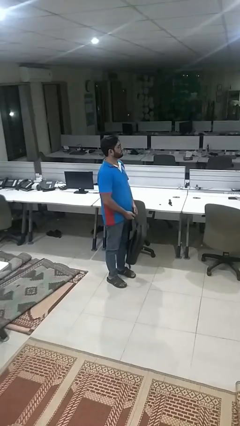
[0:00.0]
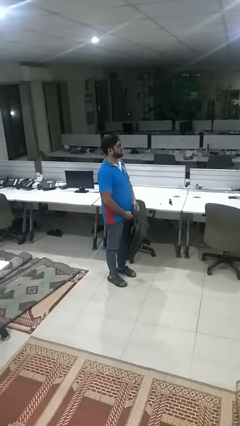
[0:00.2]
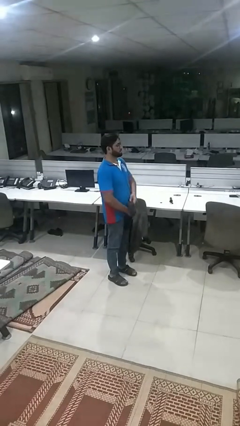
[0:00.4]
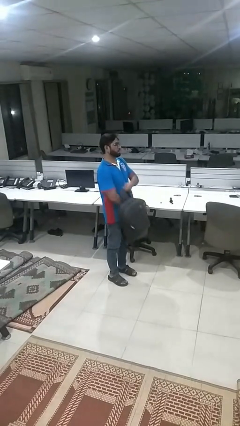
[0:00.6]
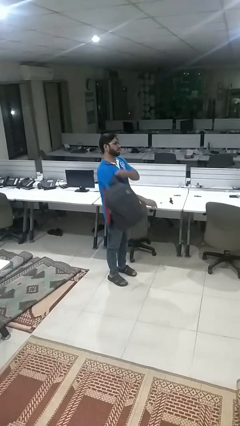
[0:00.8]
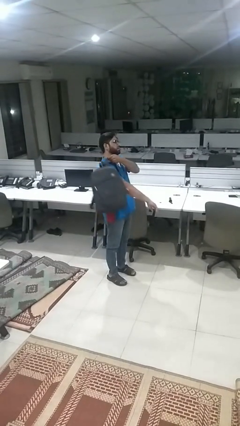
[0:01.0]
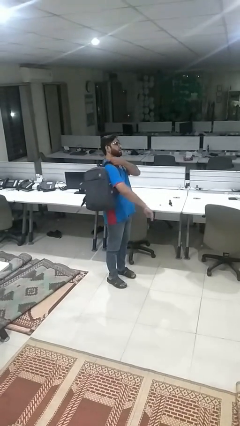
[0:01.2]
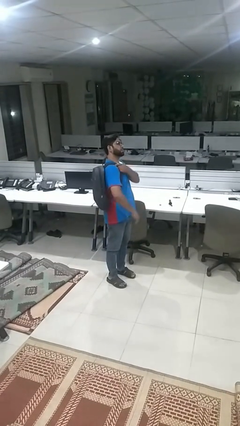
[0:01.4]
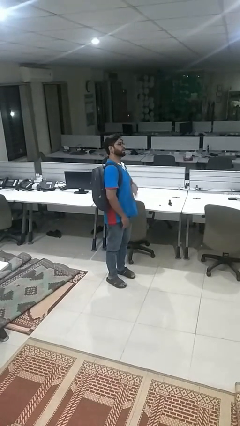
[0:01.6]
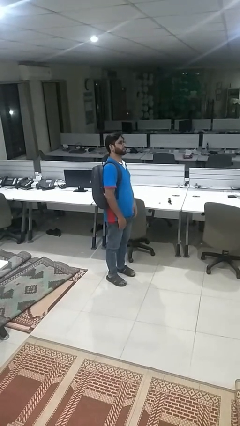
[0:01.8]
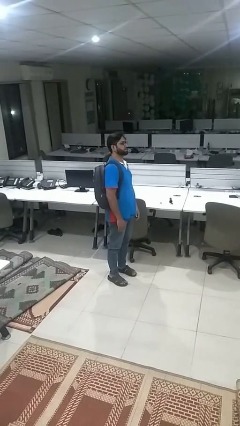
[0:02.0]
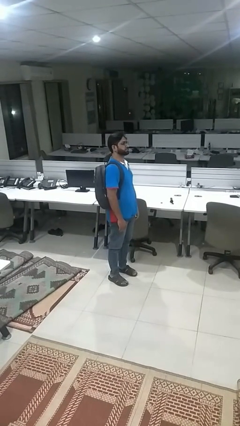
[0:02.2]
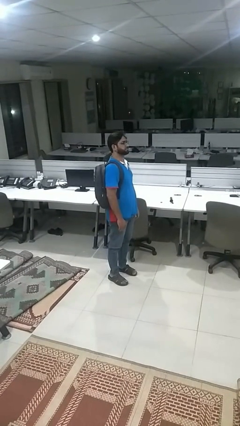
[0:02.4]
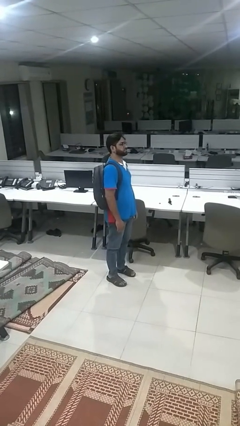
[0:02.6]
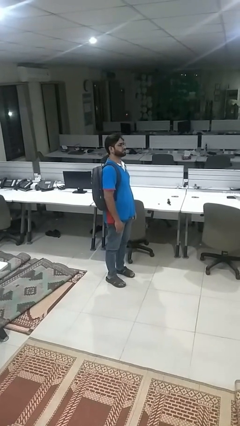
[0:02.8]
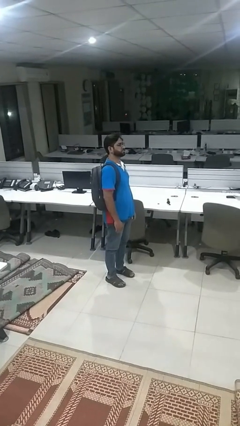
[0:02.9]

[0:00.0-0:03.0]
person puts on backpack

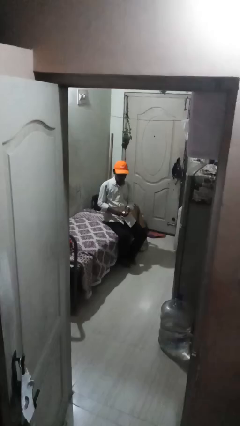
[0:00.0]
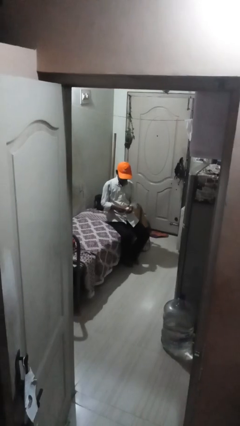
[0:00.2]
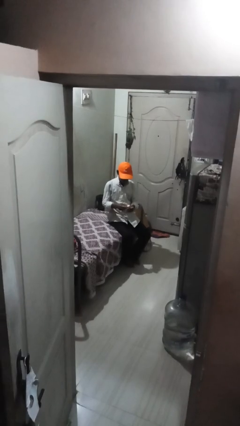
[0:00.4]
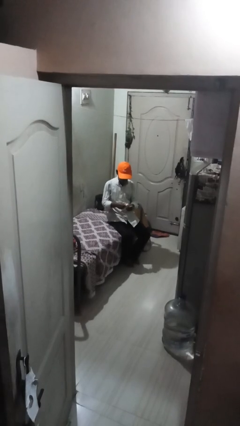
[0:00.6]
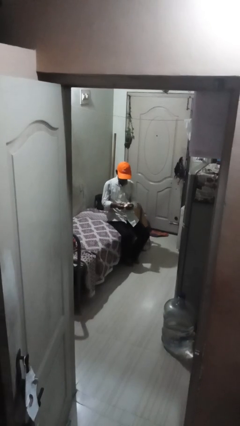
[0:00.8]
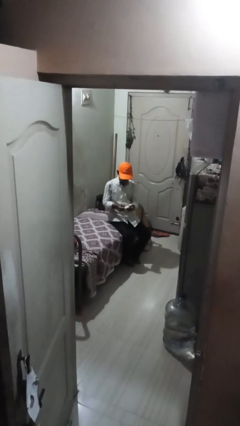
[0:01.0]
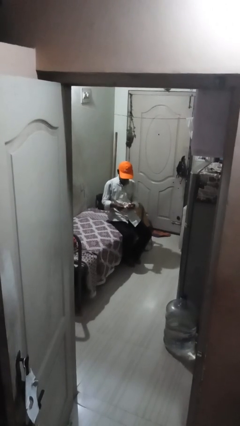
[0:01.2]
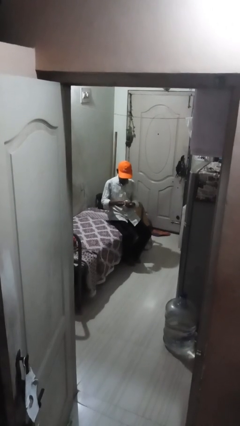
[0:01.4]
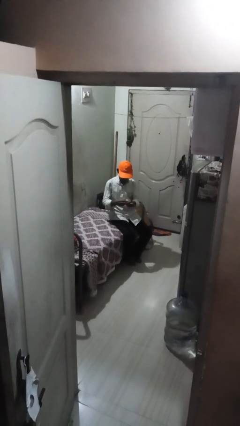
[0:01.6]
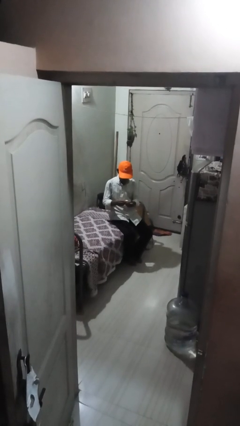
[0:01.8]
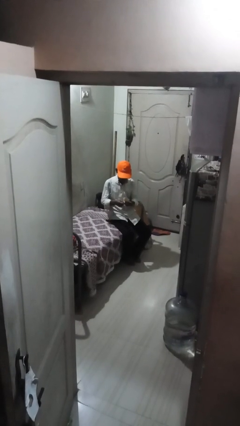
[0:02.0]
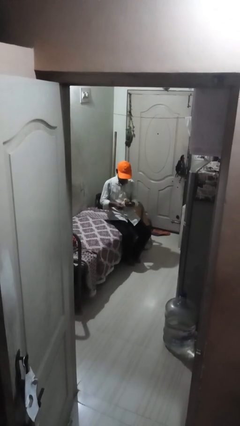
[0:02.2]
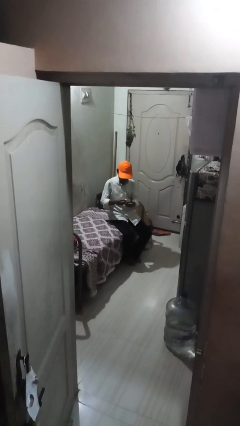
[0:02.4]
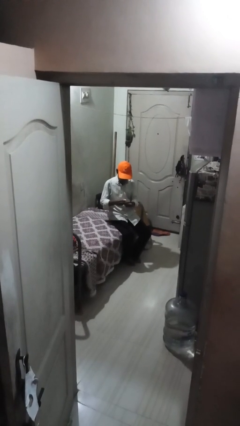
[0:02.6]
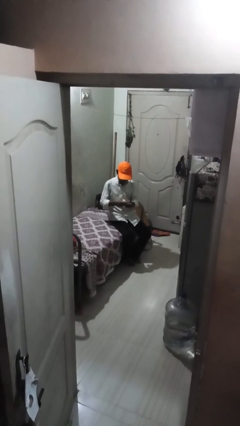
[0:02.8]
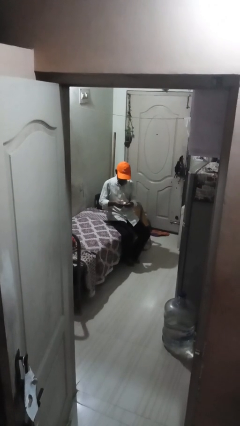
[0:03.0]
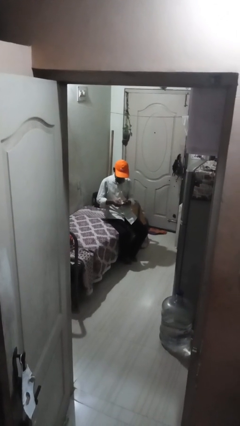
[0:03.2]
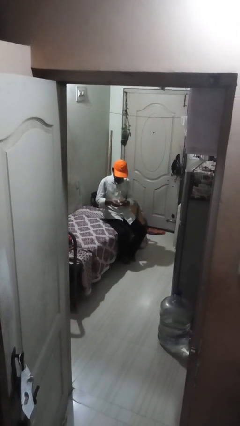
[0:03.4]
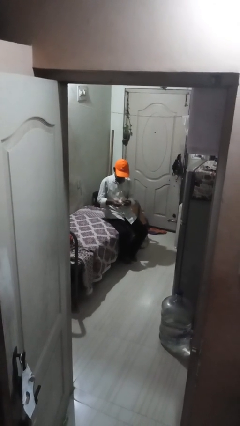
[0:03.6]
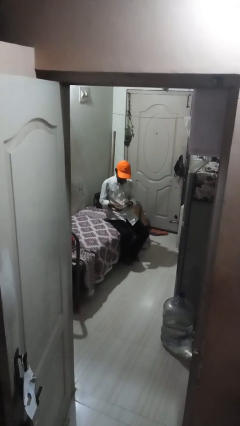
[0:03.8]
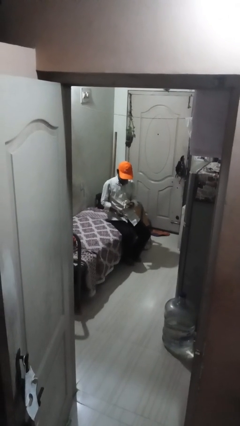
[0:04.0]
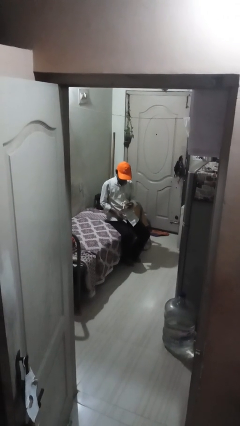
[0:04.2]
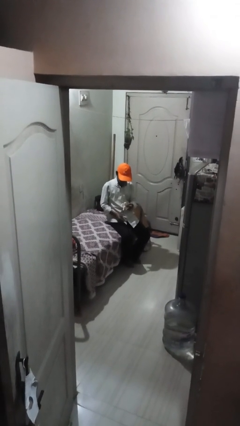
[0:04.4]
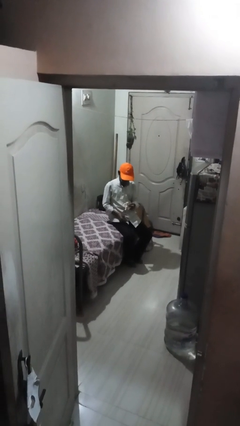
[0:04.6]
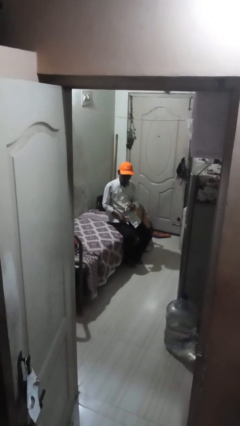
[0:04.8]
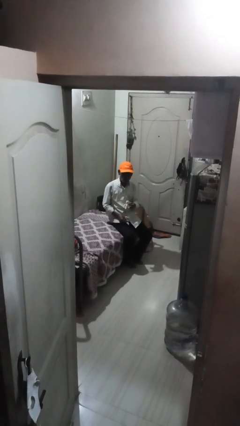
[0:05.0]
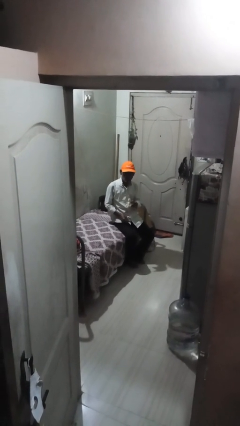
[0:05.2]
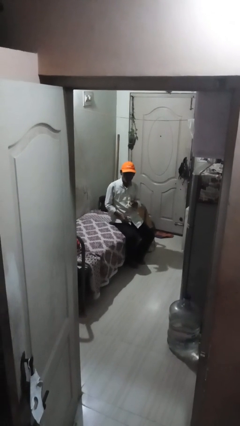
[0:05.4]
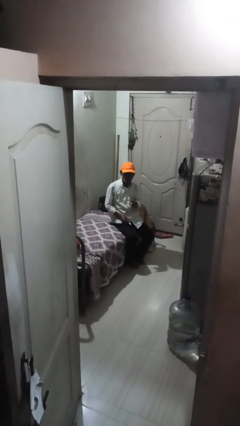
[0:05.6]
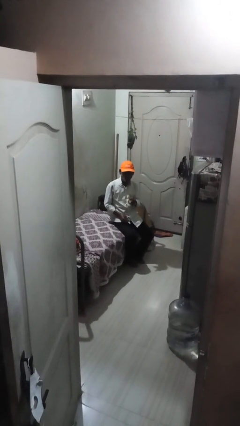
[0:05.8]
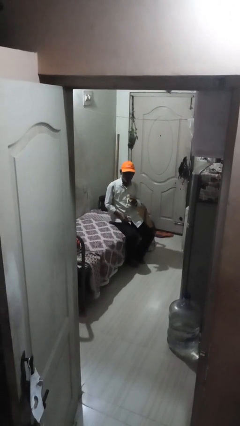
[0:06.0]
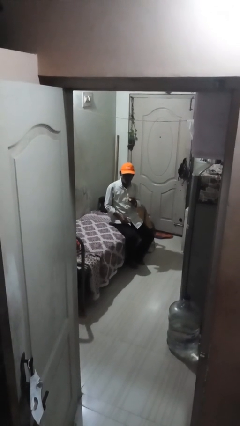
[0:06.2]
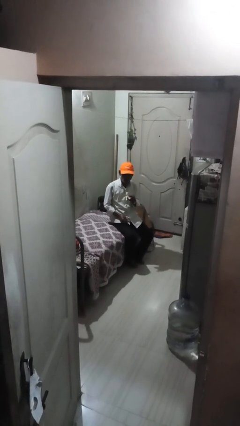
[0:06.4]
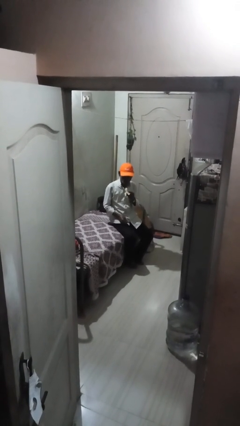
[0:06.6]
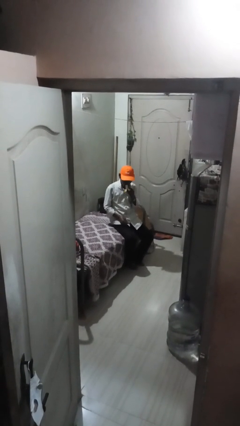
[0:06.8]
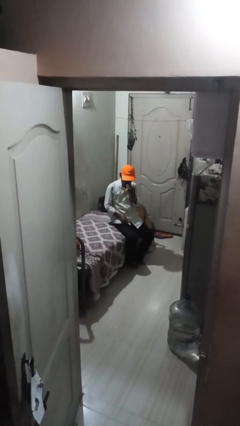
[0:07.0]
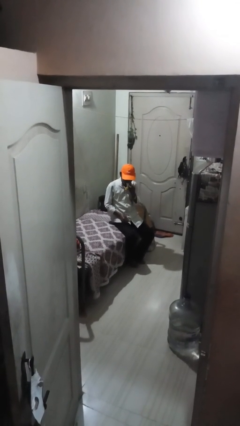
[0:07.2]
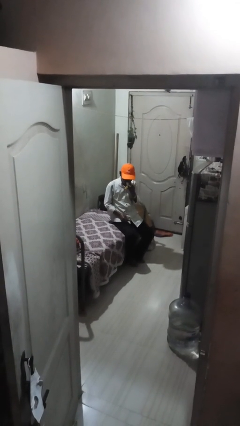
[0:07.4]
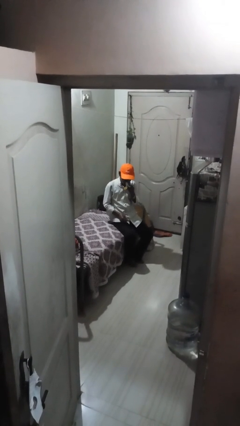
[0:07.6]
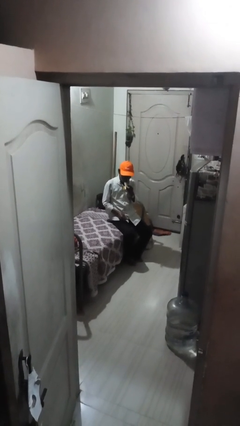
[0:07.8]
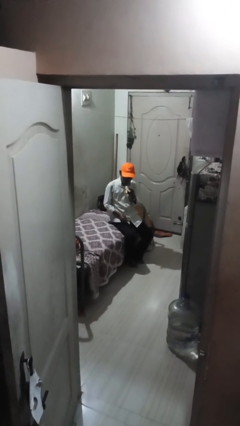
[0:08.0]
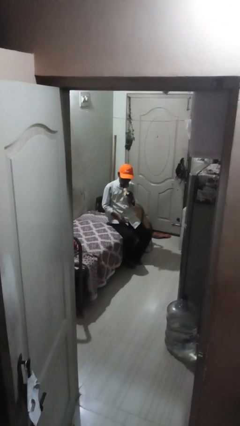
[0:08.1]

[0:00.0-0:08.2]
person eats banana

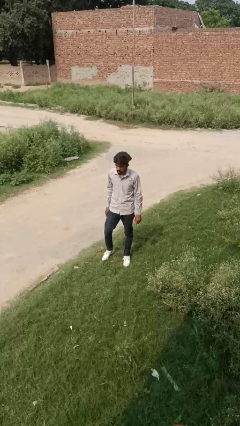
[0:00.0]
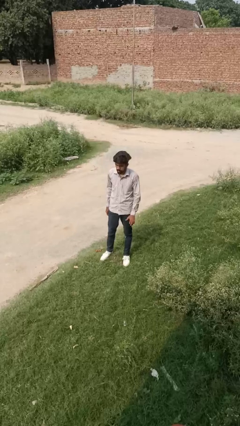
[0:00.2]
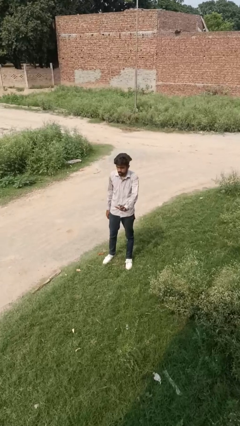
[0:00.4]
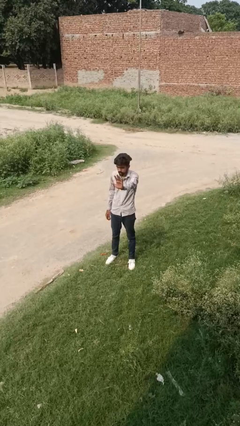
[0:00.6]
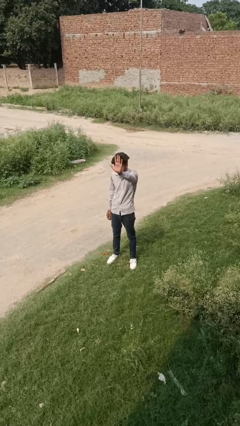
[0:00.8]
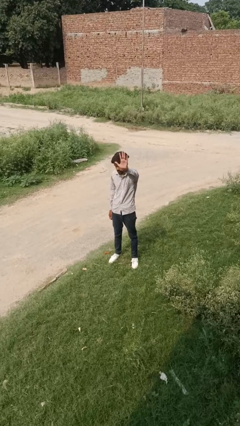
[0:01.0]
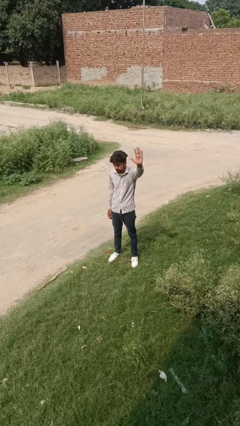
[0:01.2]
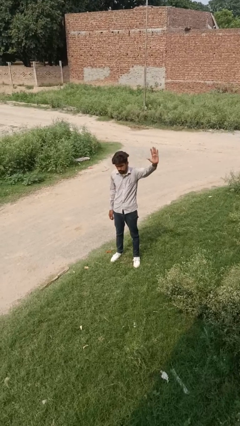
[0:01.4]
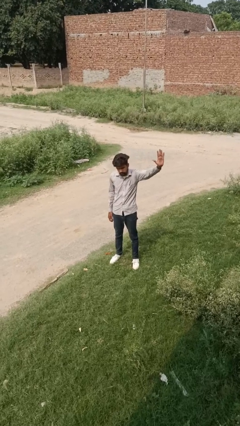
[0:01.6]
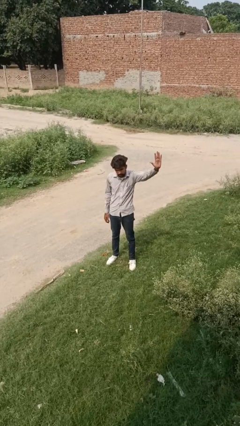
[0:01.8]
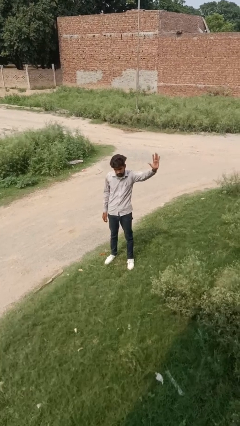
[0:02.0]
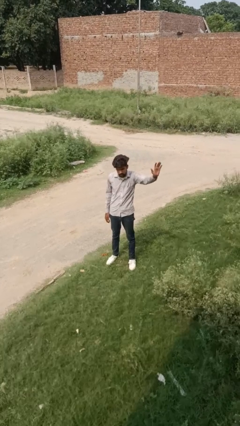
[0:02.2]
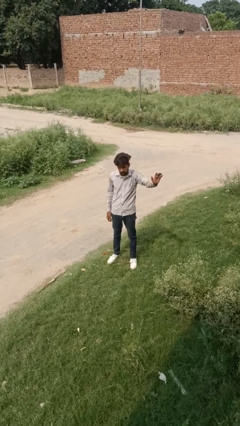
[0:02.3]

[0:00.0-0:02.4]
person gestures swipe left

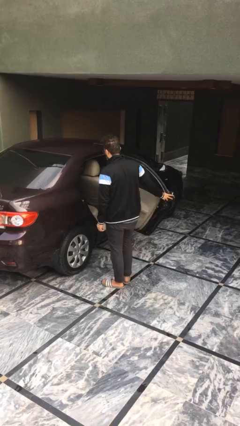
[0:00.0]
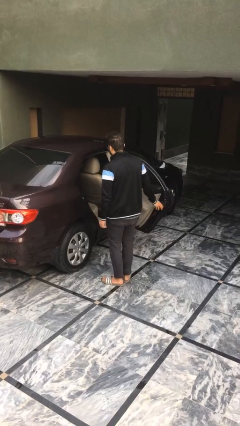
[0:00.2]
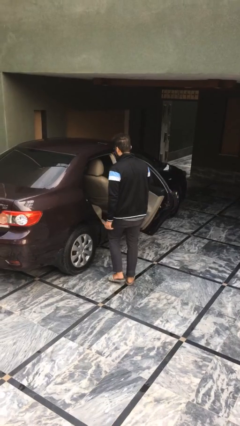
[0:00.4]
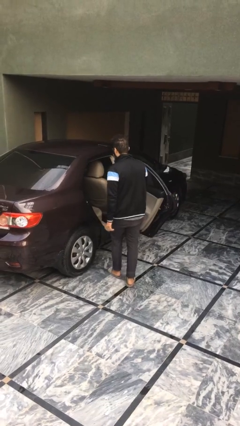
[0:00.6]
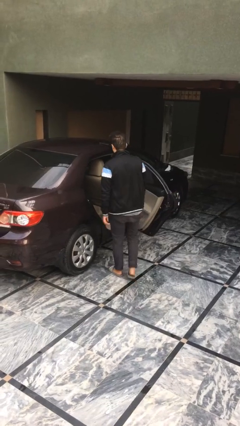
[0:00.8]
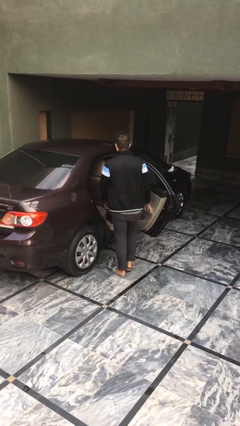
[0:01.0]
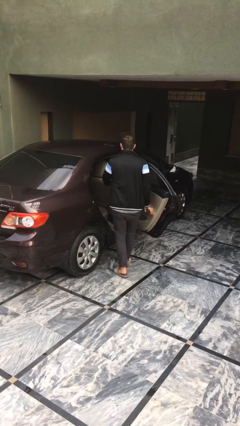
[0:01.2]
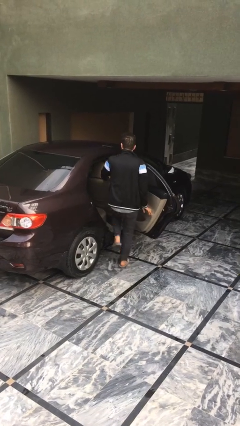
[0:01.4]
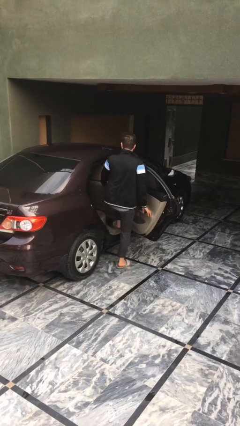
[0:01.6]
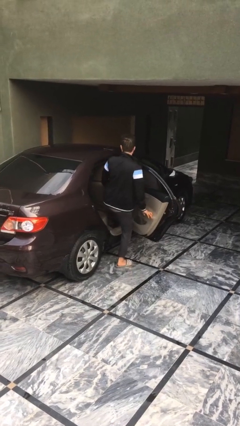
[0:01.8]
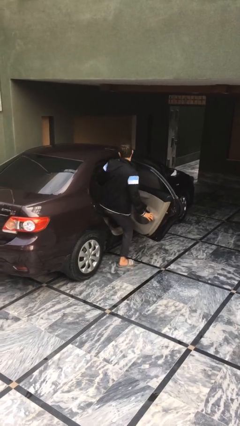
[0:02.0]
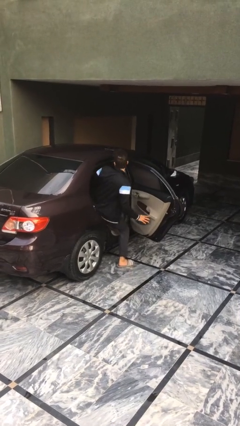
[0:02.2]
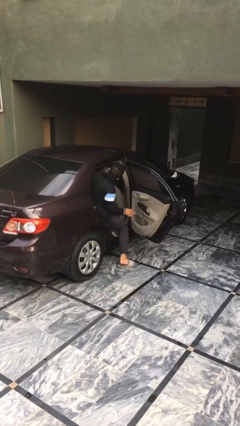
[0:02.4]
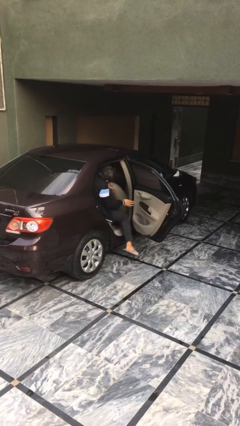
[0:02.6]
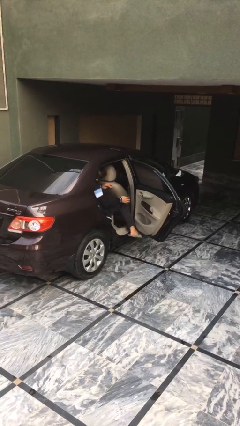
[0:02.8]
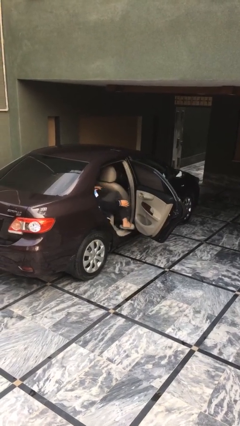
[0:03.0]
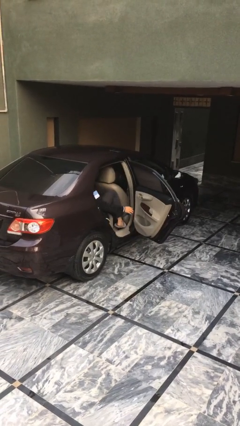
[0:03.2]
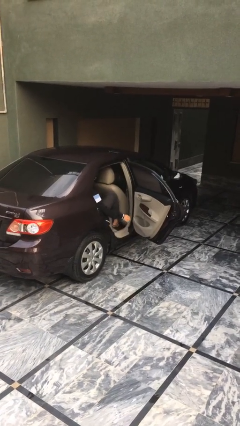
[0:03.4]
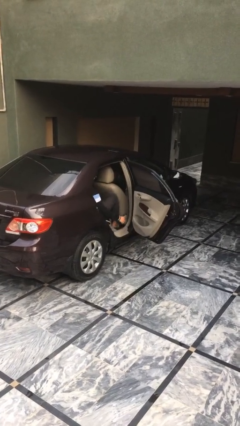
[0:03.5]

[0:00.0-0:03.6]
person enters car

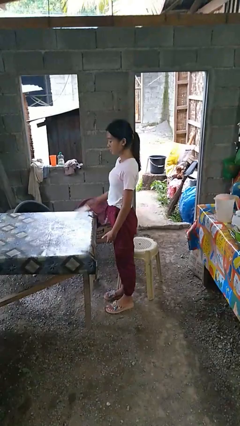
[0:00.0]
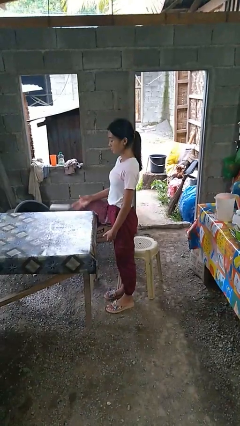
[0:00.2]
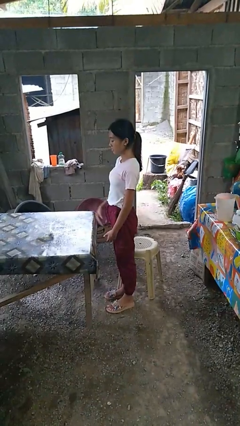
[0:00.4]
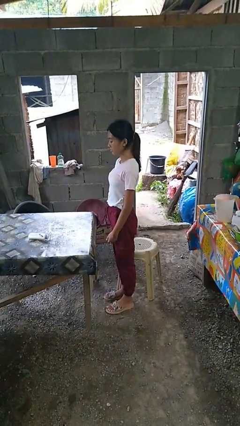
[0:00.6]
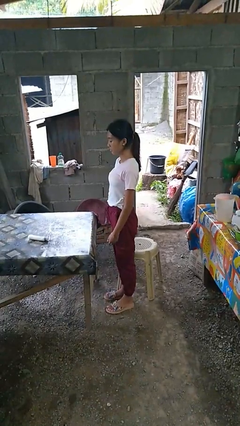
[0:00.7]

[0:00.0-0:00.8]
person throws object on table
